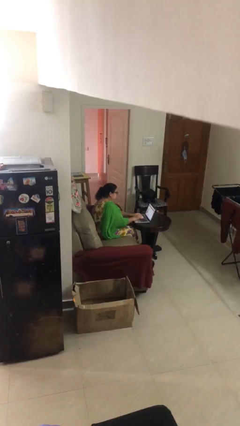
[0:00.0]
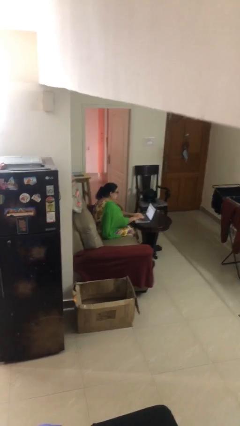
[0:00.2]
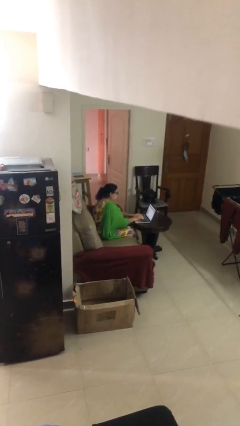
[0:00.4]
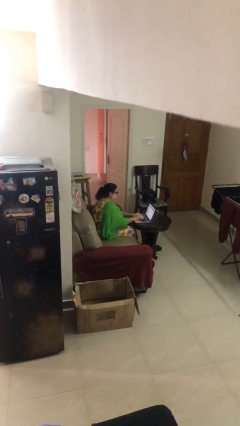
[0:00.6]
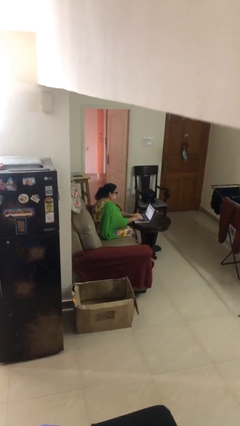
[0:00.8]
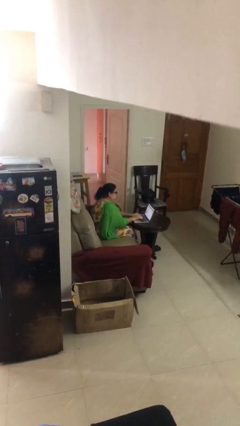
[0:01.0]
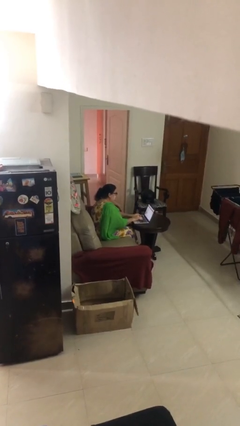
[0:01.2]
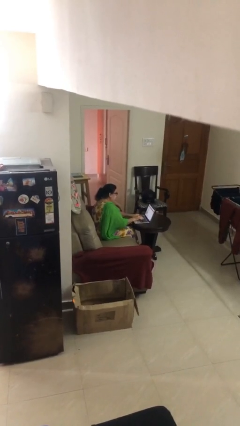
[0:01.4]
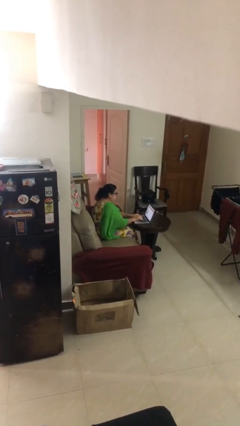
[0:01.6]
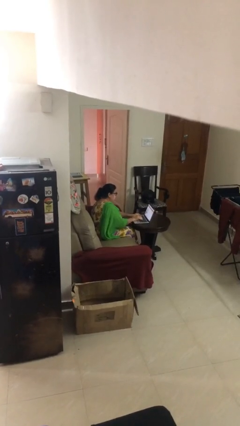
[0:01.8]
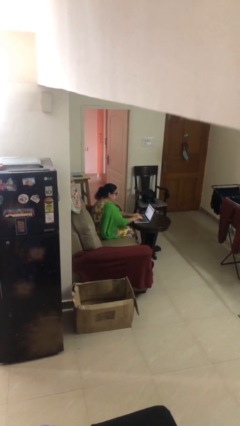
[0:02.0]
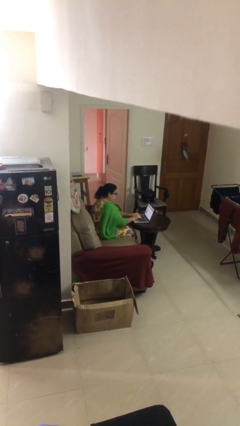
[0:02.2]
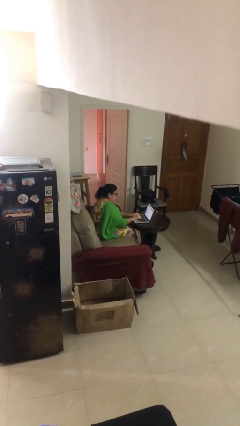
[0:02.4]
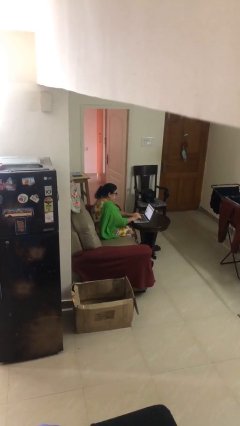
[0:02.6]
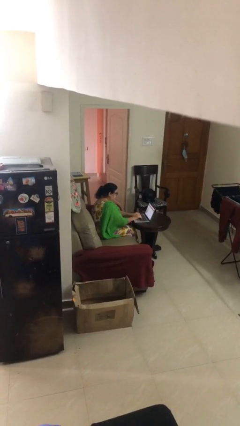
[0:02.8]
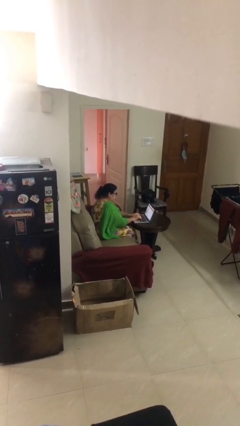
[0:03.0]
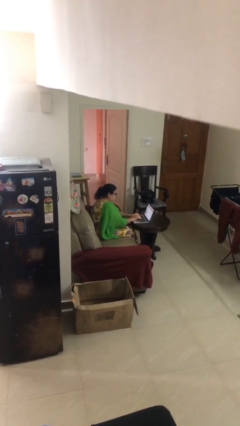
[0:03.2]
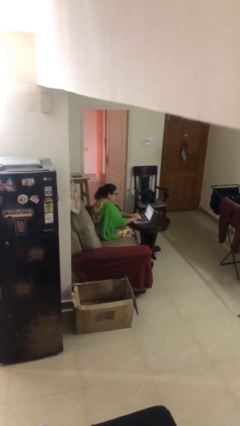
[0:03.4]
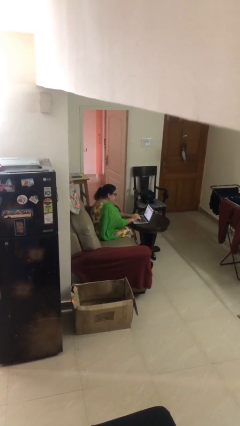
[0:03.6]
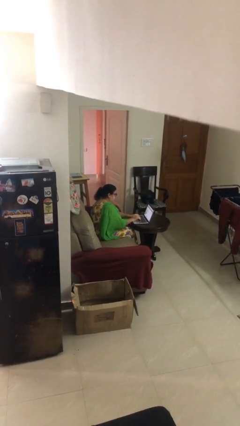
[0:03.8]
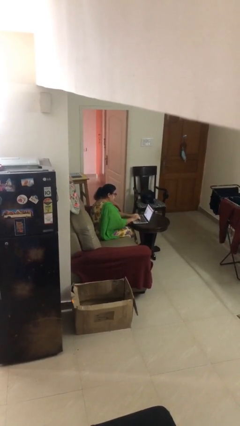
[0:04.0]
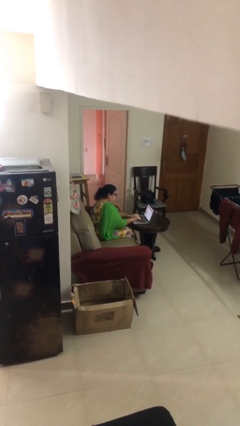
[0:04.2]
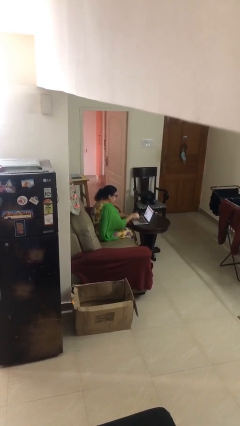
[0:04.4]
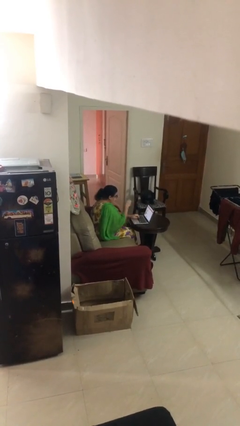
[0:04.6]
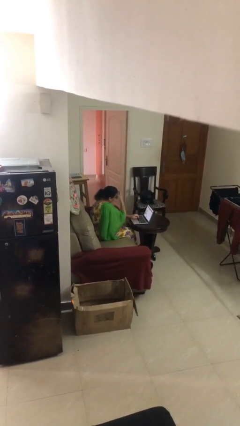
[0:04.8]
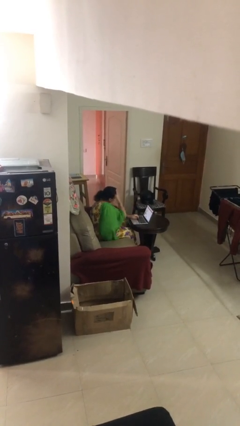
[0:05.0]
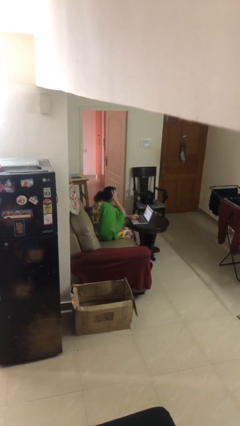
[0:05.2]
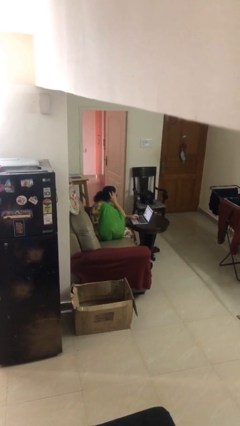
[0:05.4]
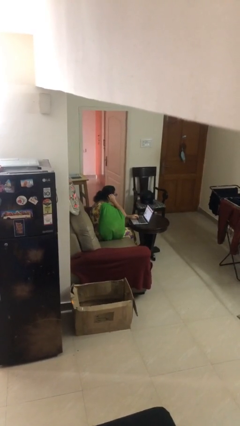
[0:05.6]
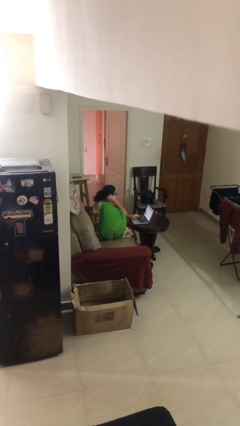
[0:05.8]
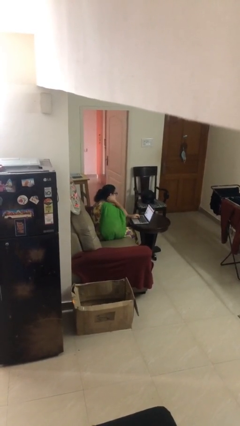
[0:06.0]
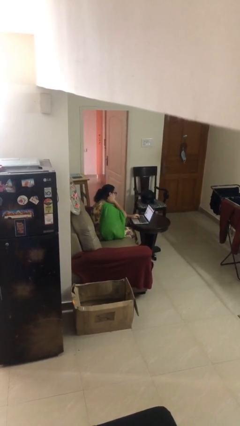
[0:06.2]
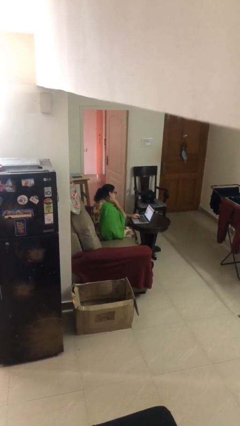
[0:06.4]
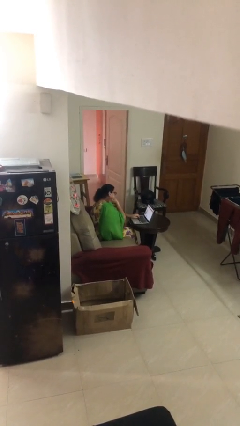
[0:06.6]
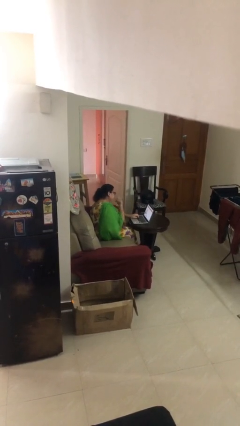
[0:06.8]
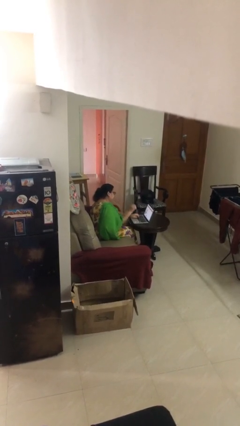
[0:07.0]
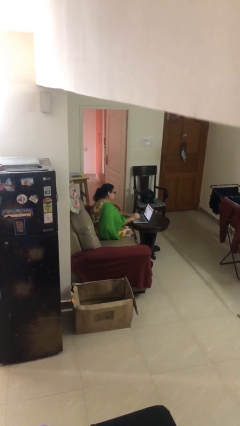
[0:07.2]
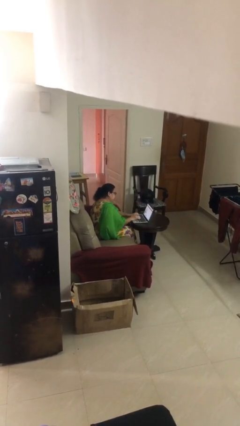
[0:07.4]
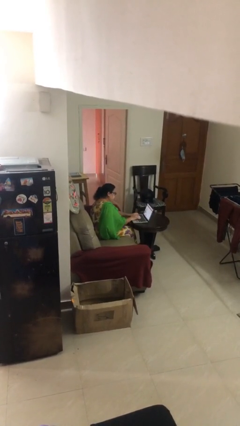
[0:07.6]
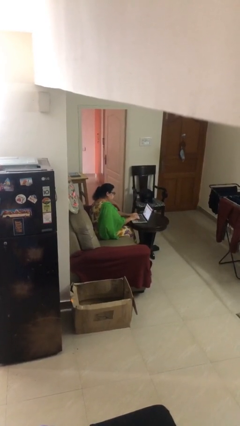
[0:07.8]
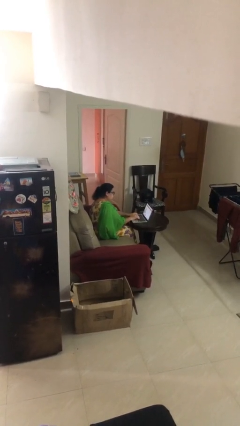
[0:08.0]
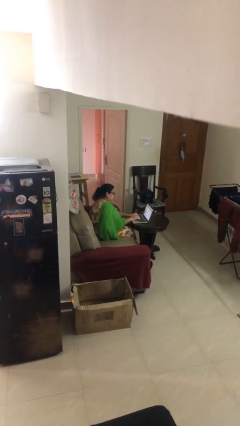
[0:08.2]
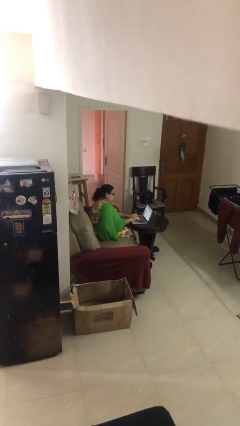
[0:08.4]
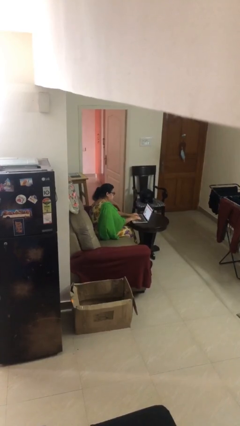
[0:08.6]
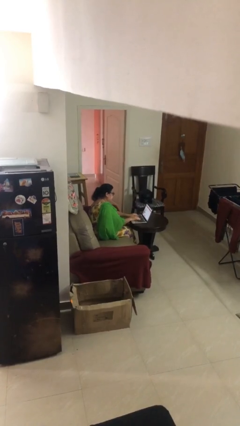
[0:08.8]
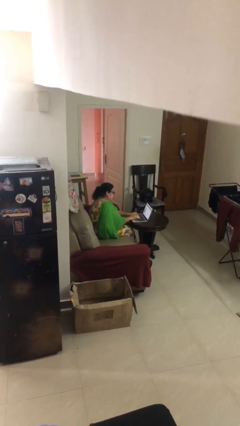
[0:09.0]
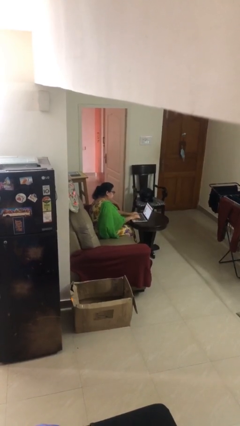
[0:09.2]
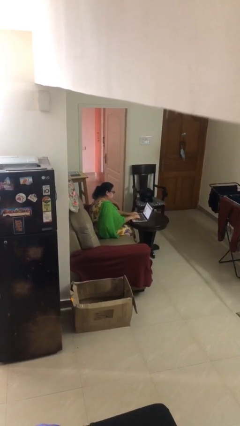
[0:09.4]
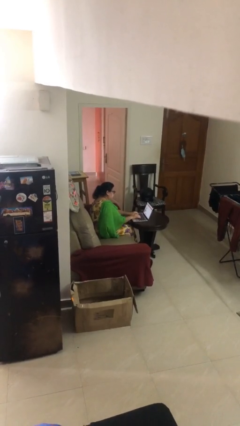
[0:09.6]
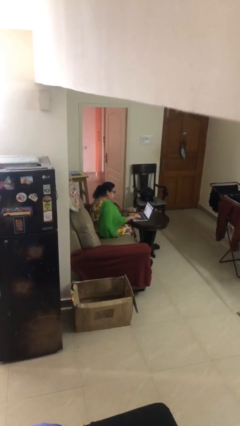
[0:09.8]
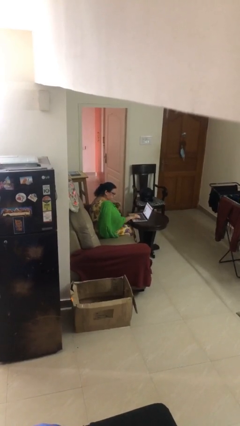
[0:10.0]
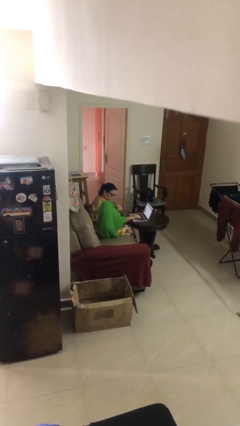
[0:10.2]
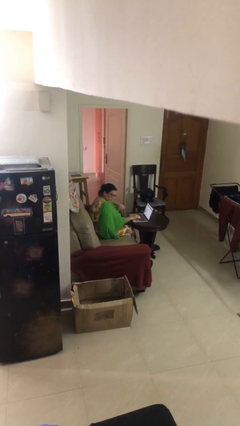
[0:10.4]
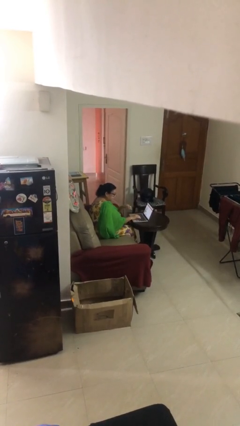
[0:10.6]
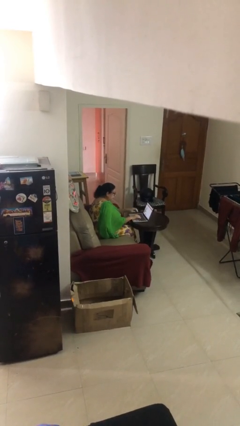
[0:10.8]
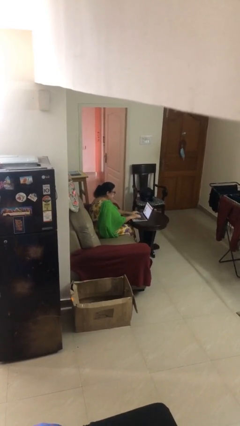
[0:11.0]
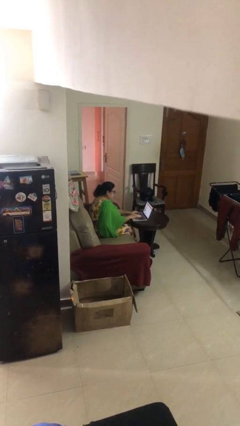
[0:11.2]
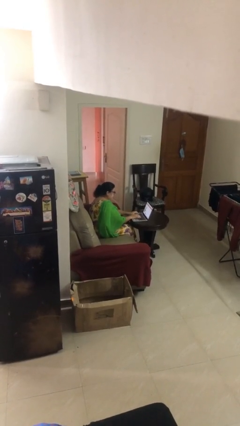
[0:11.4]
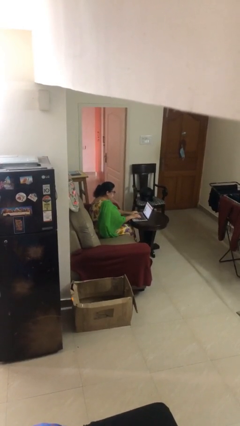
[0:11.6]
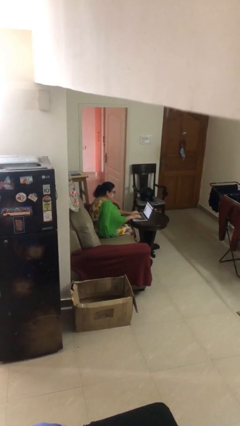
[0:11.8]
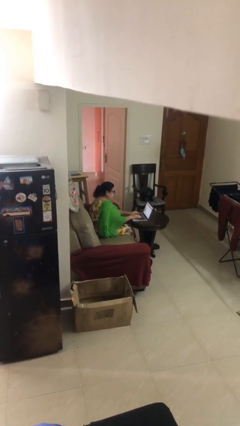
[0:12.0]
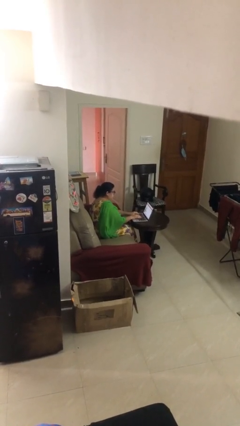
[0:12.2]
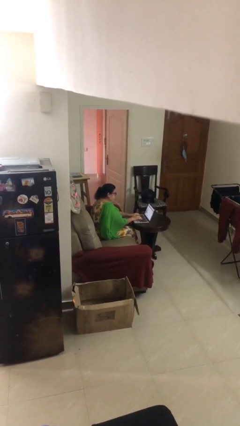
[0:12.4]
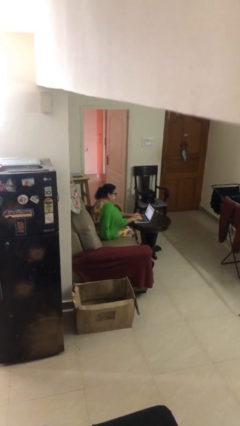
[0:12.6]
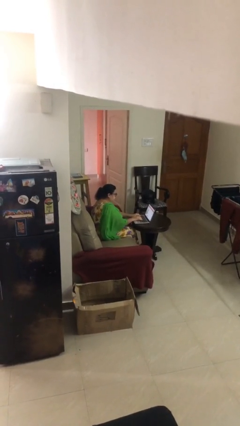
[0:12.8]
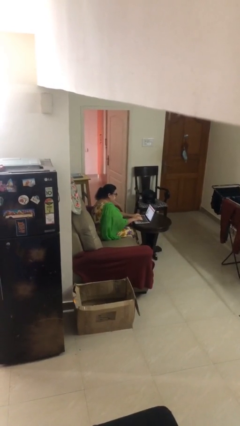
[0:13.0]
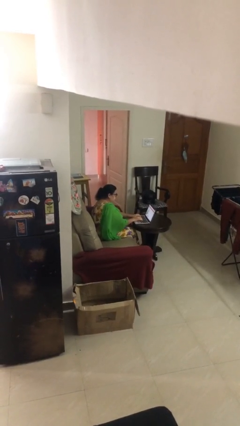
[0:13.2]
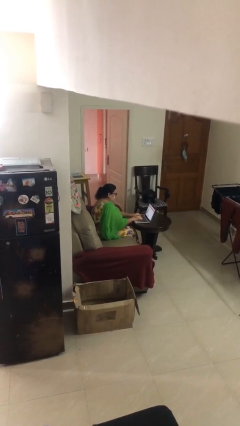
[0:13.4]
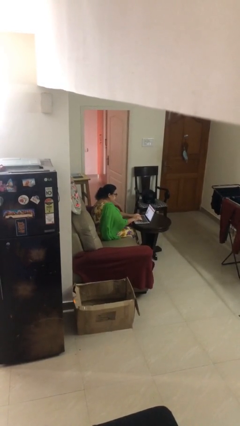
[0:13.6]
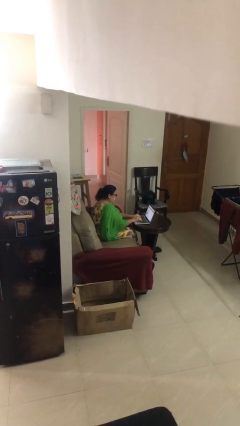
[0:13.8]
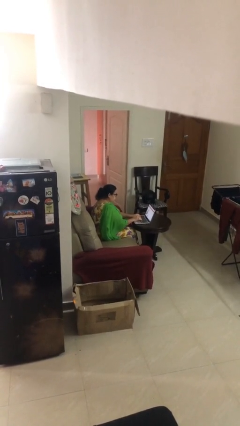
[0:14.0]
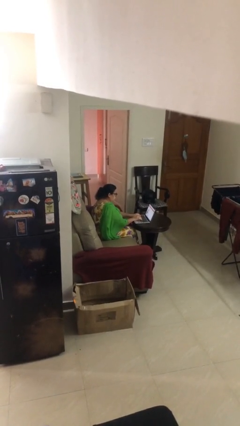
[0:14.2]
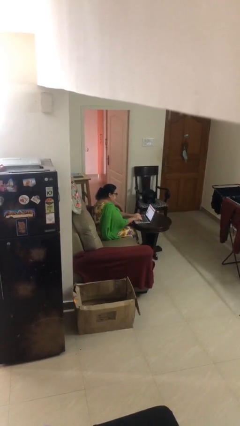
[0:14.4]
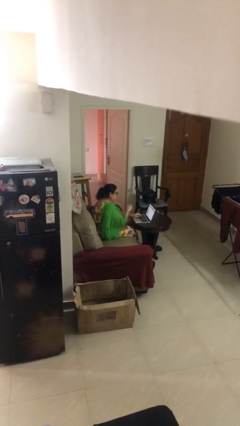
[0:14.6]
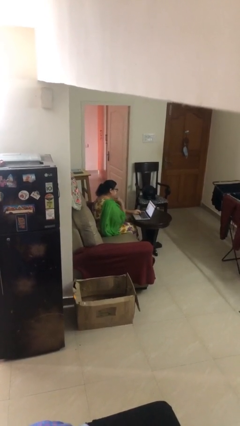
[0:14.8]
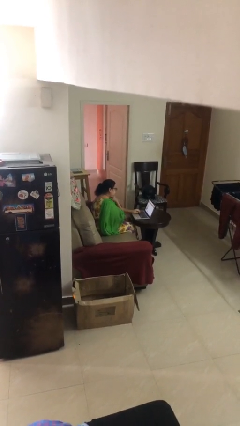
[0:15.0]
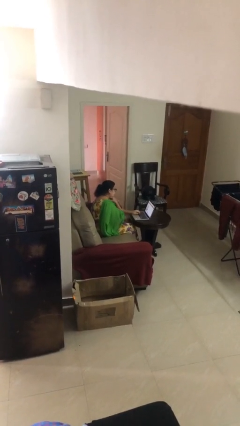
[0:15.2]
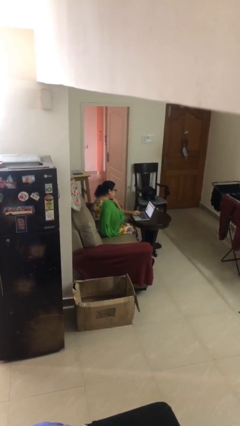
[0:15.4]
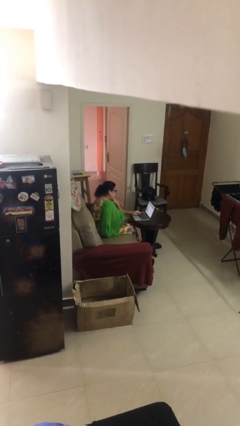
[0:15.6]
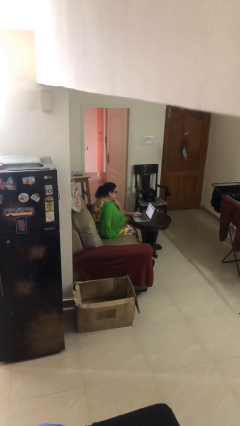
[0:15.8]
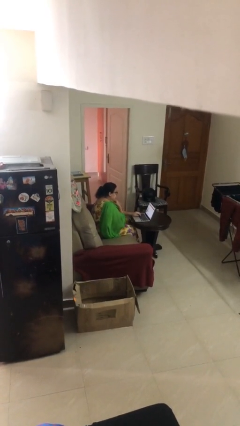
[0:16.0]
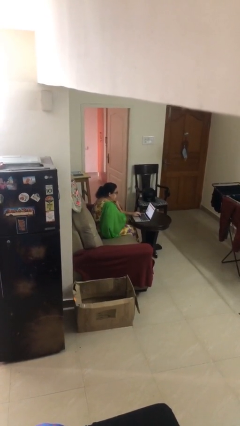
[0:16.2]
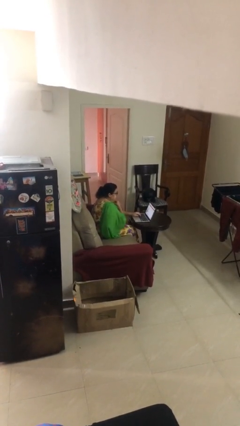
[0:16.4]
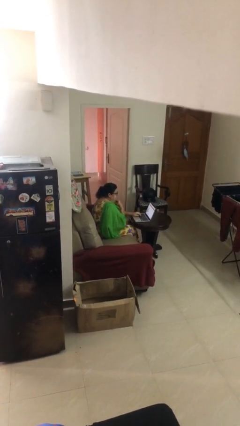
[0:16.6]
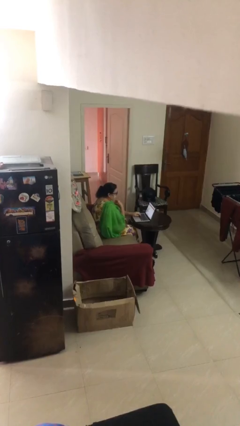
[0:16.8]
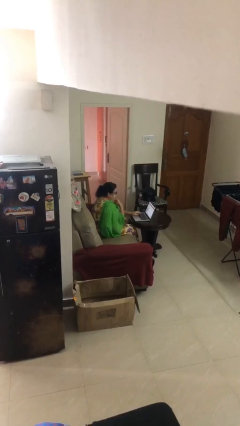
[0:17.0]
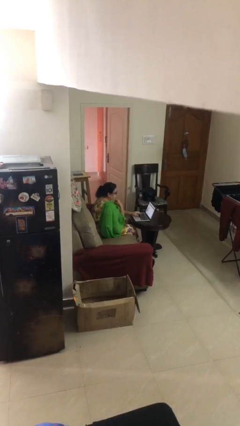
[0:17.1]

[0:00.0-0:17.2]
person interacts with laptop

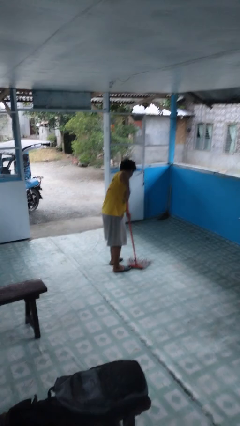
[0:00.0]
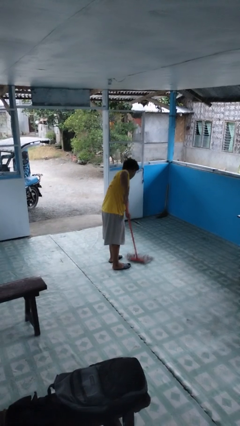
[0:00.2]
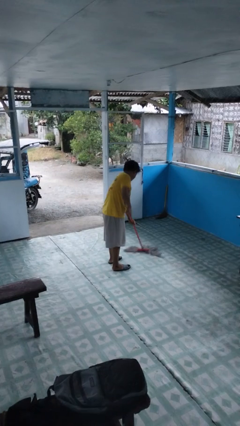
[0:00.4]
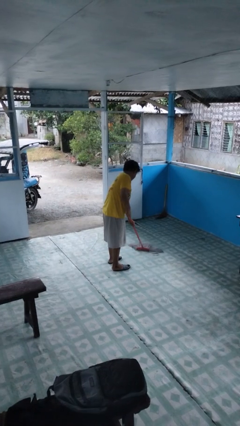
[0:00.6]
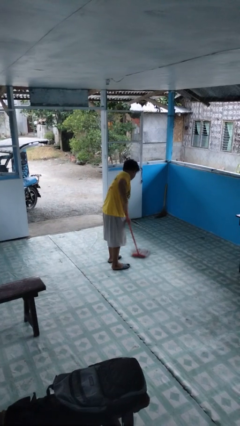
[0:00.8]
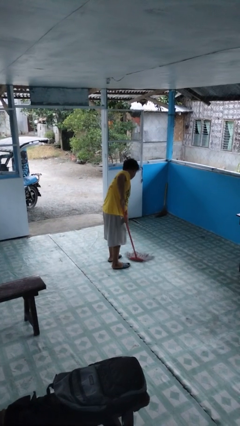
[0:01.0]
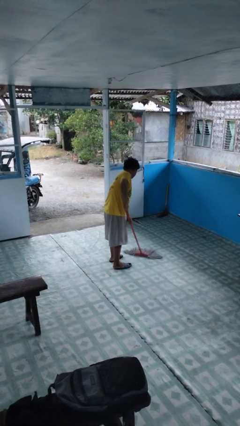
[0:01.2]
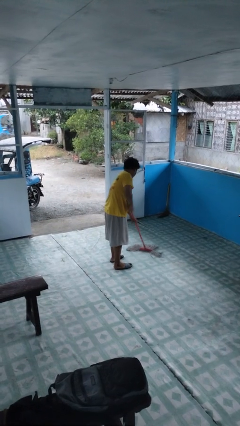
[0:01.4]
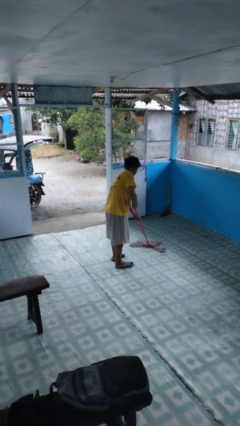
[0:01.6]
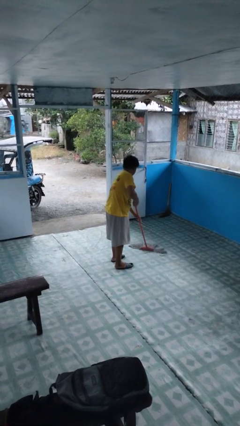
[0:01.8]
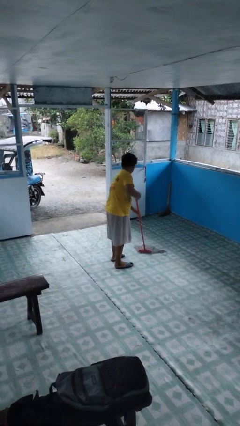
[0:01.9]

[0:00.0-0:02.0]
person mops
